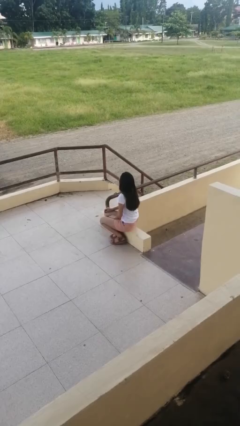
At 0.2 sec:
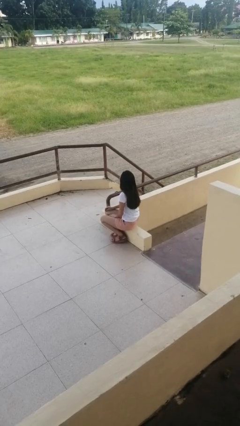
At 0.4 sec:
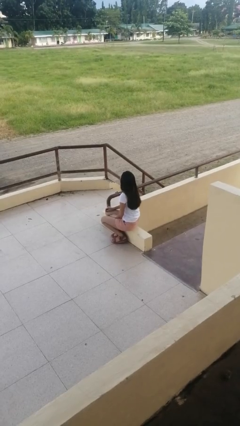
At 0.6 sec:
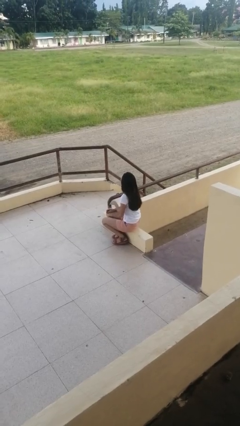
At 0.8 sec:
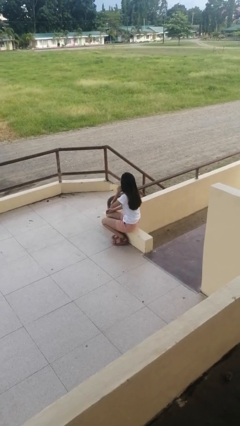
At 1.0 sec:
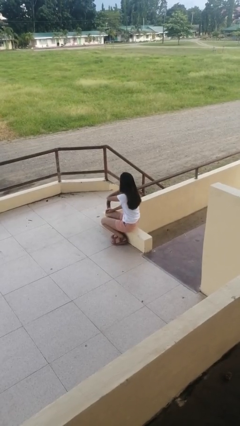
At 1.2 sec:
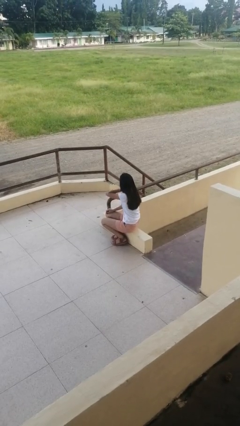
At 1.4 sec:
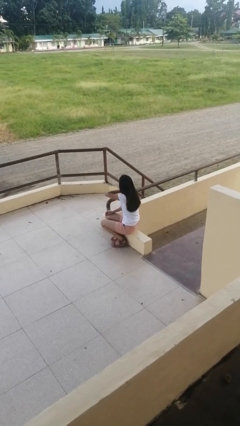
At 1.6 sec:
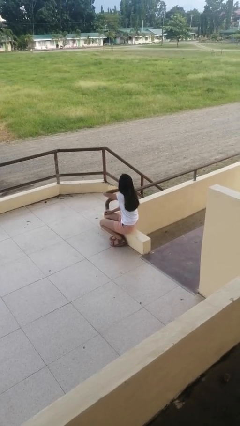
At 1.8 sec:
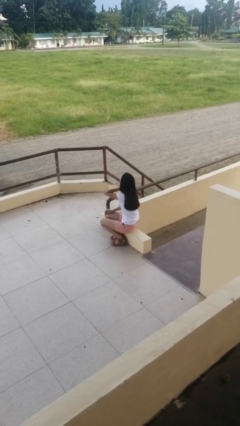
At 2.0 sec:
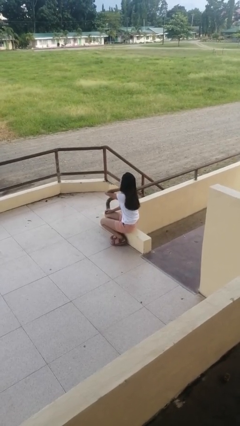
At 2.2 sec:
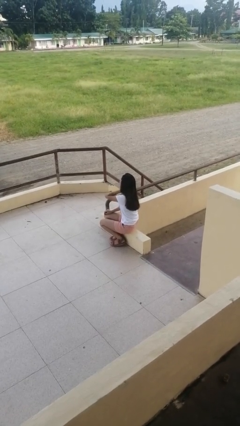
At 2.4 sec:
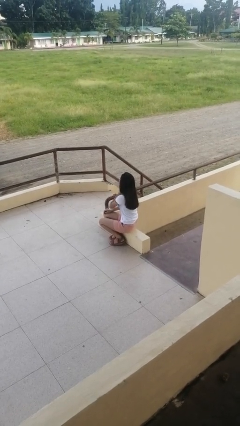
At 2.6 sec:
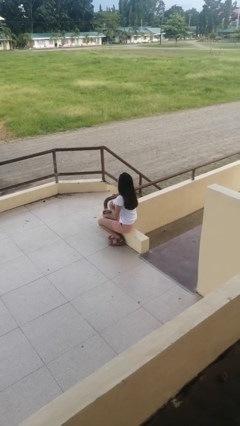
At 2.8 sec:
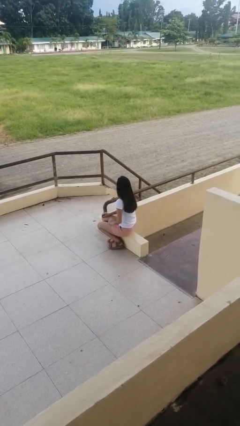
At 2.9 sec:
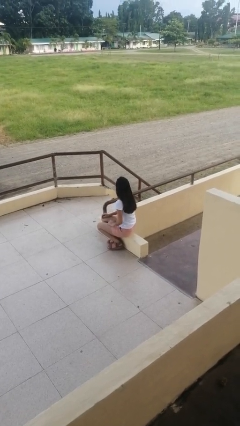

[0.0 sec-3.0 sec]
person rubs neck

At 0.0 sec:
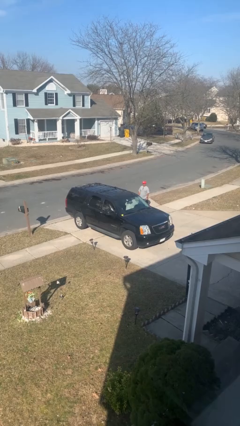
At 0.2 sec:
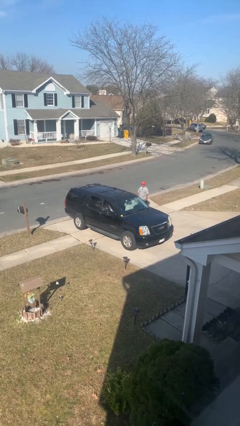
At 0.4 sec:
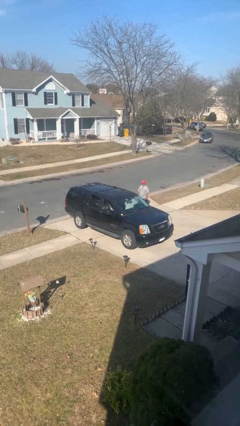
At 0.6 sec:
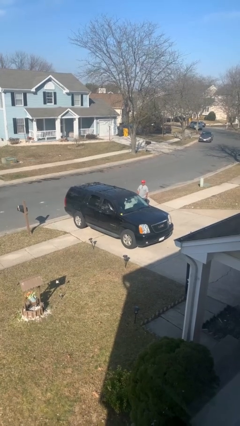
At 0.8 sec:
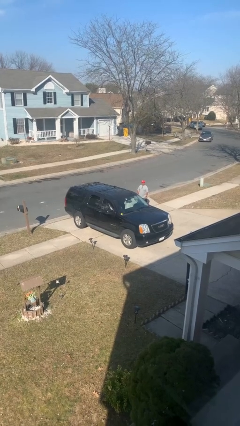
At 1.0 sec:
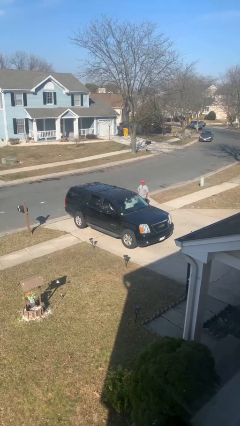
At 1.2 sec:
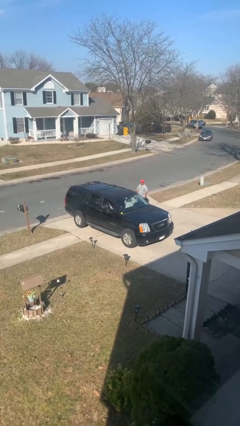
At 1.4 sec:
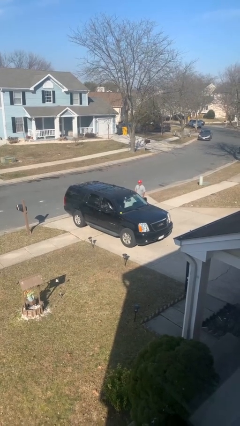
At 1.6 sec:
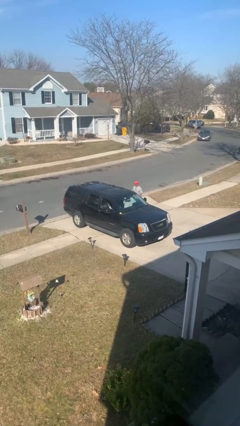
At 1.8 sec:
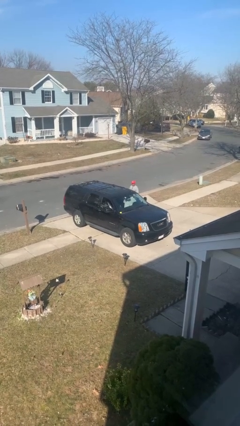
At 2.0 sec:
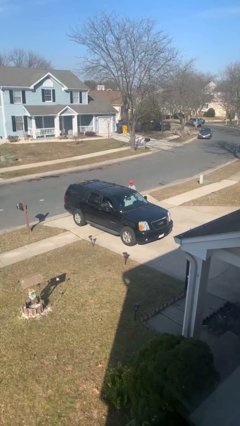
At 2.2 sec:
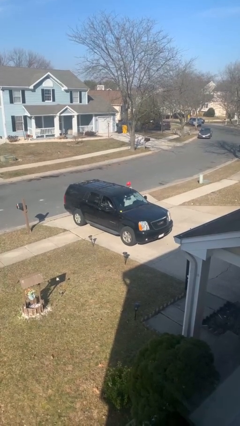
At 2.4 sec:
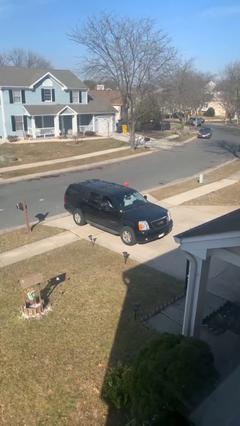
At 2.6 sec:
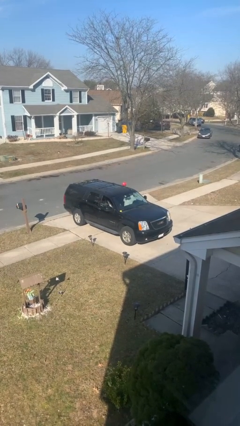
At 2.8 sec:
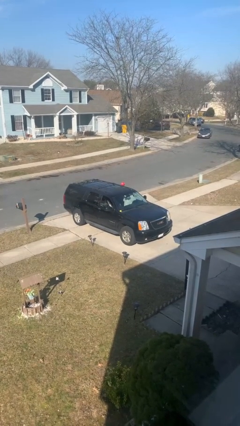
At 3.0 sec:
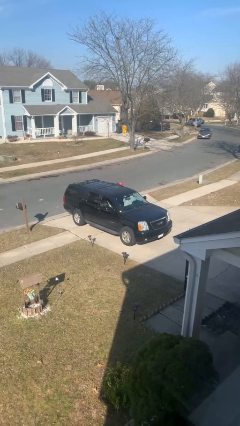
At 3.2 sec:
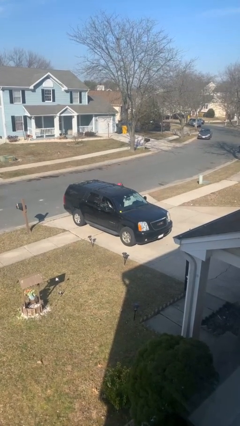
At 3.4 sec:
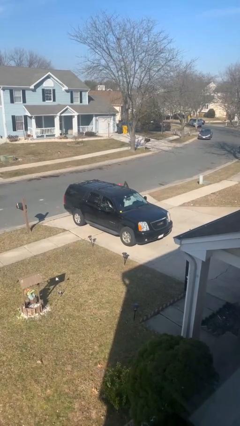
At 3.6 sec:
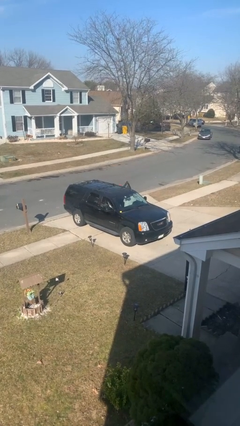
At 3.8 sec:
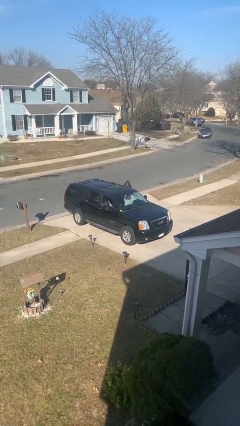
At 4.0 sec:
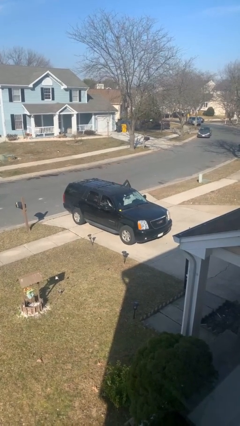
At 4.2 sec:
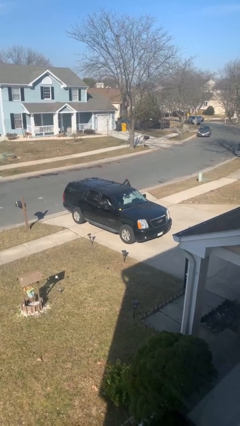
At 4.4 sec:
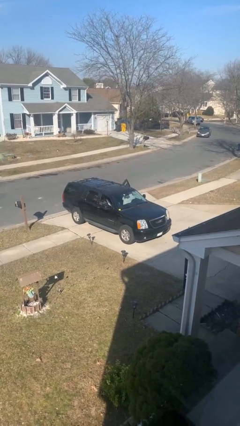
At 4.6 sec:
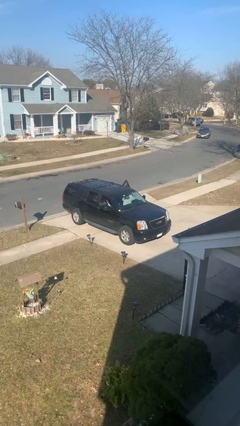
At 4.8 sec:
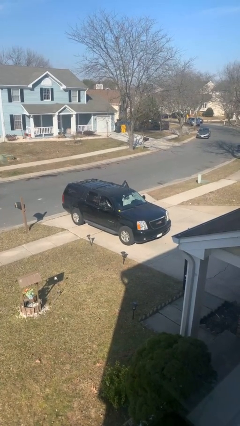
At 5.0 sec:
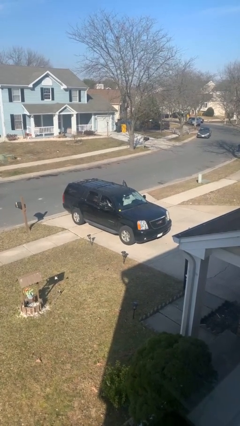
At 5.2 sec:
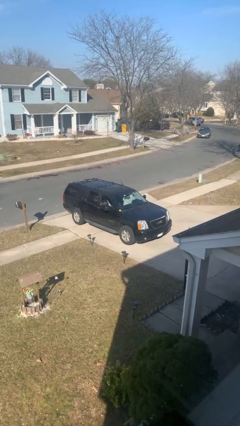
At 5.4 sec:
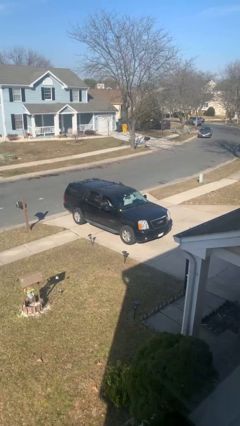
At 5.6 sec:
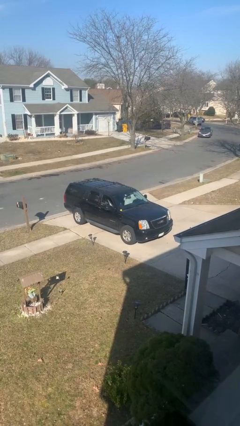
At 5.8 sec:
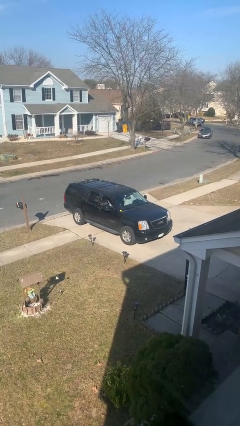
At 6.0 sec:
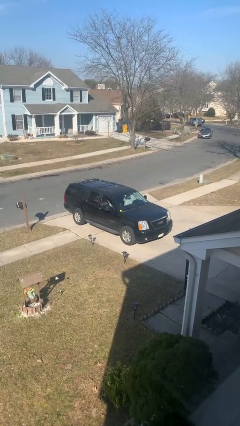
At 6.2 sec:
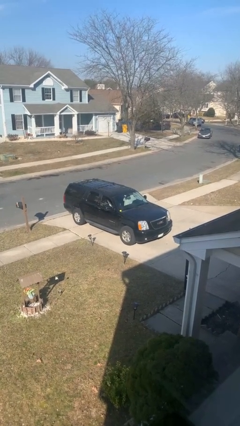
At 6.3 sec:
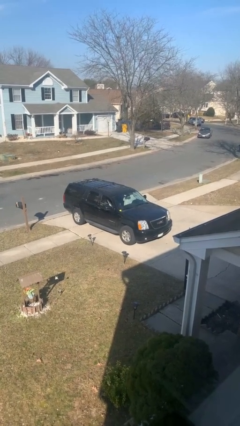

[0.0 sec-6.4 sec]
car picks up person

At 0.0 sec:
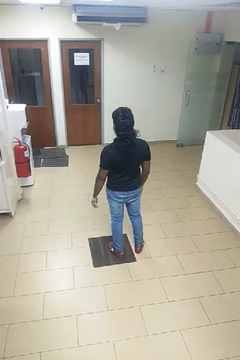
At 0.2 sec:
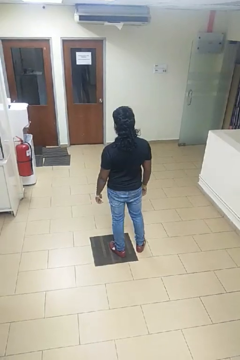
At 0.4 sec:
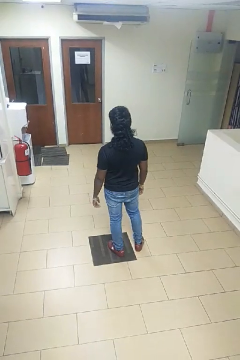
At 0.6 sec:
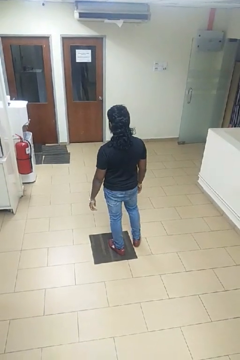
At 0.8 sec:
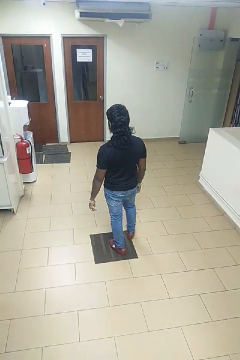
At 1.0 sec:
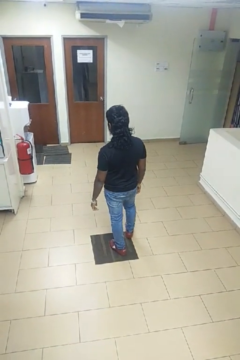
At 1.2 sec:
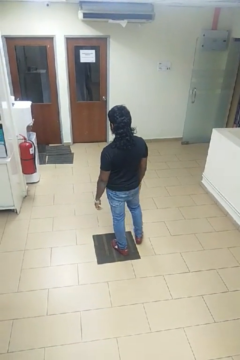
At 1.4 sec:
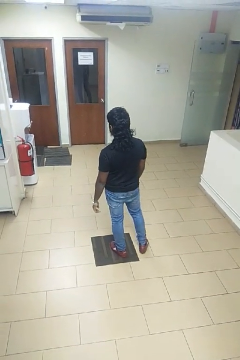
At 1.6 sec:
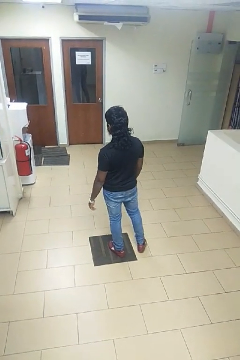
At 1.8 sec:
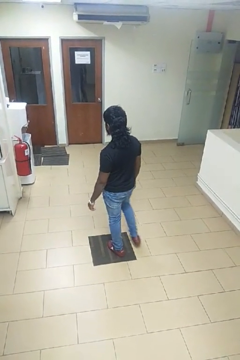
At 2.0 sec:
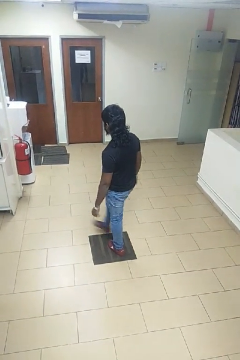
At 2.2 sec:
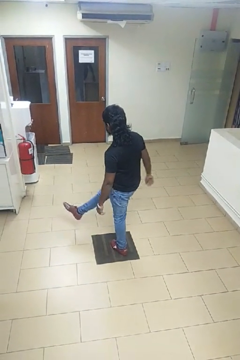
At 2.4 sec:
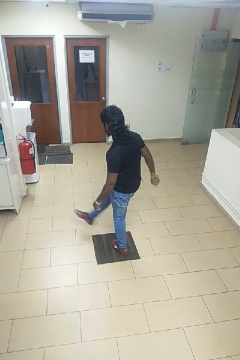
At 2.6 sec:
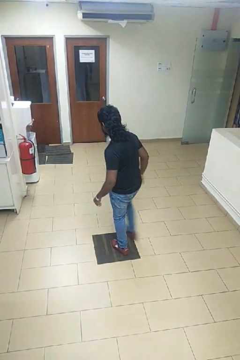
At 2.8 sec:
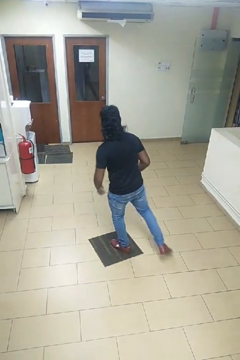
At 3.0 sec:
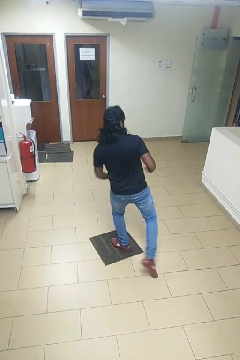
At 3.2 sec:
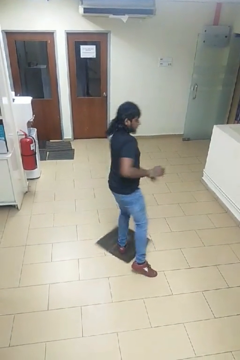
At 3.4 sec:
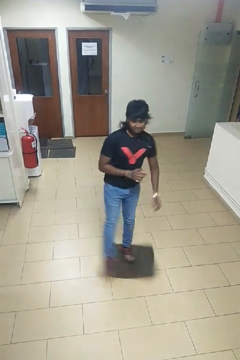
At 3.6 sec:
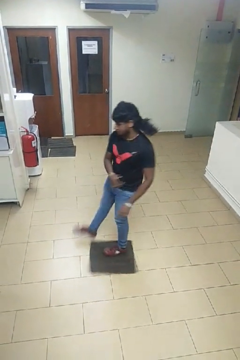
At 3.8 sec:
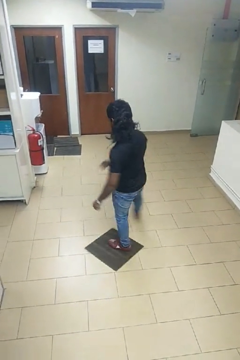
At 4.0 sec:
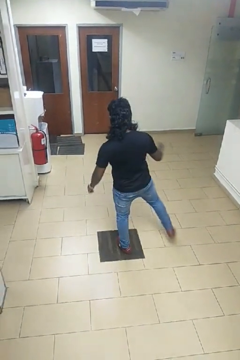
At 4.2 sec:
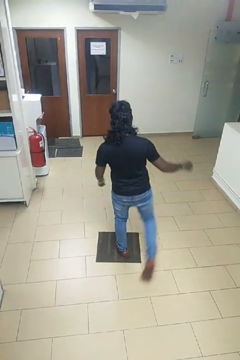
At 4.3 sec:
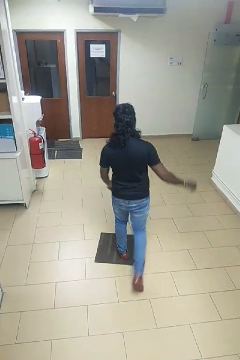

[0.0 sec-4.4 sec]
person twirls

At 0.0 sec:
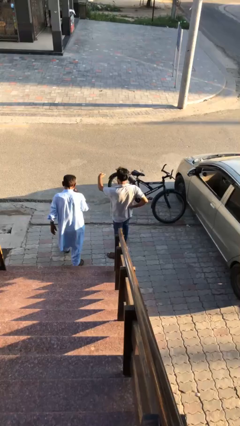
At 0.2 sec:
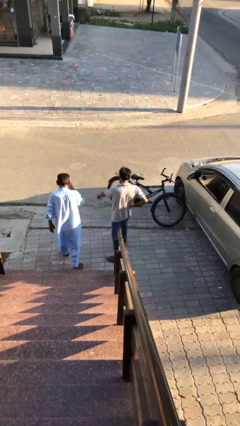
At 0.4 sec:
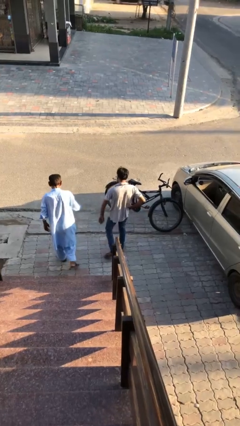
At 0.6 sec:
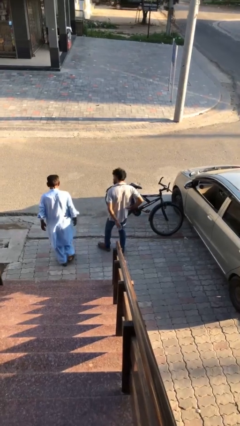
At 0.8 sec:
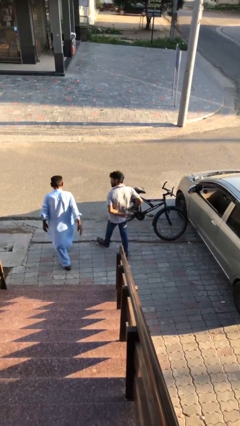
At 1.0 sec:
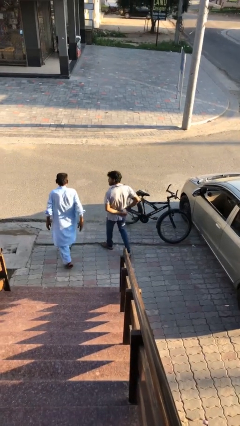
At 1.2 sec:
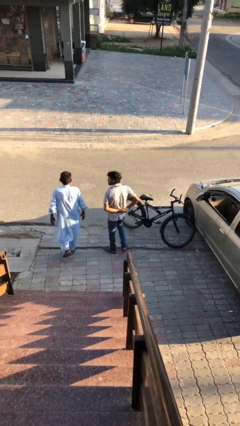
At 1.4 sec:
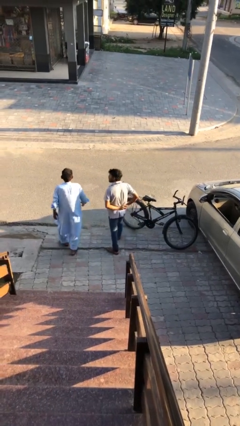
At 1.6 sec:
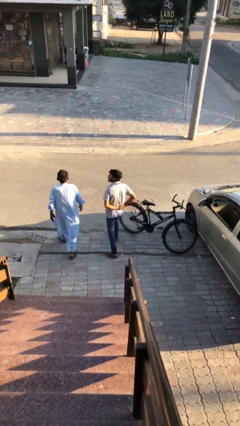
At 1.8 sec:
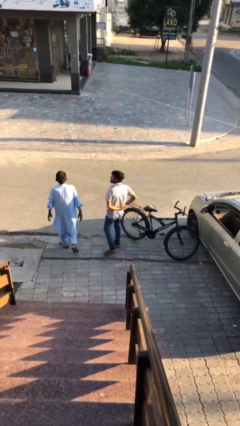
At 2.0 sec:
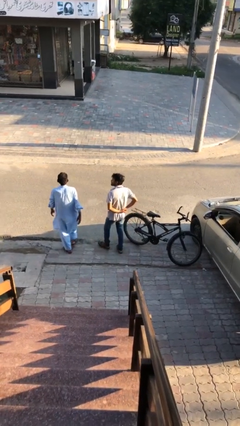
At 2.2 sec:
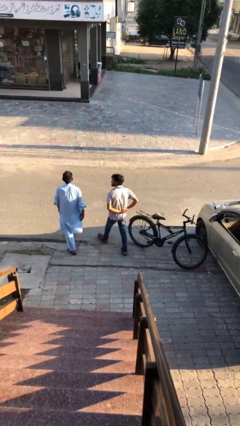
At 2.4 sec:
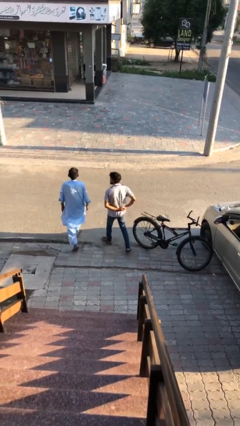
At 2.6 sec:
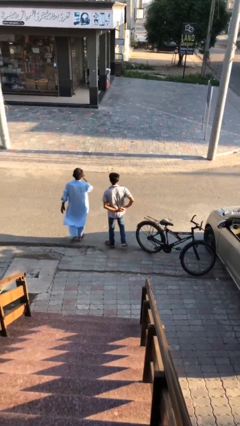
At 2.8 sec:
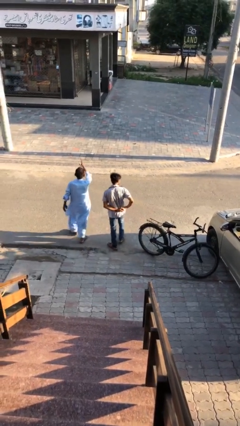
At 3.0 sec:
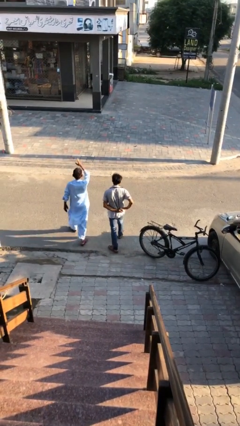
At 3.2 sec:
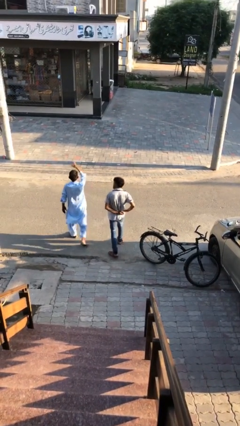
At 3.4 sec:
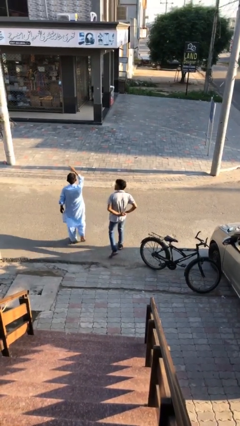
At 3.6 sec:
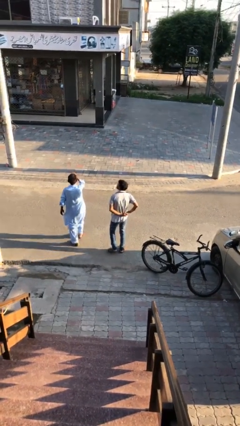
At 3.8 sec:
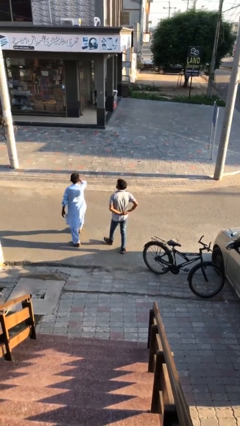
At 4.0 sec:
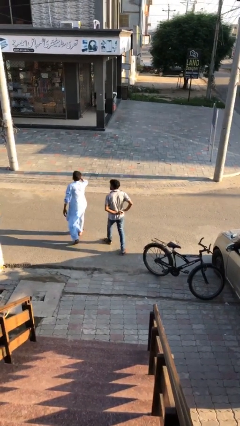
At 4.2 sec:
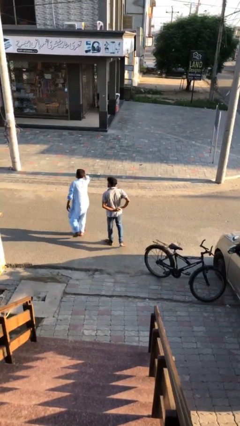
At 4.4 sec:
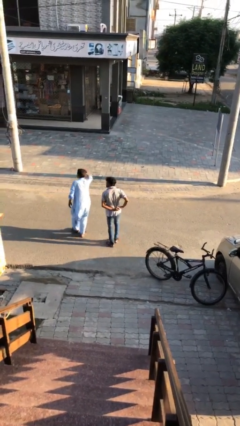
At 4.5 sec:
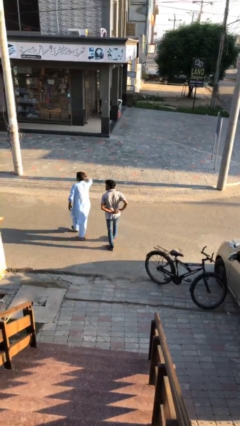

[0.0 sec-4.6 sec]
person talks to person
